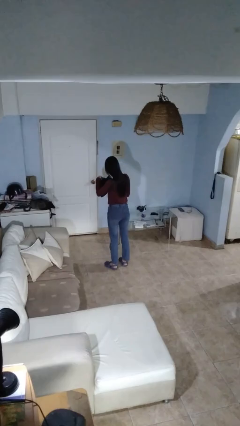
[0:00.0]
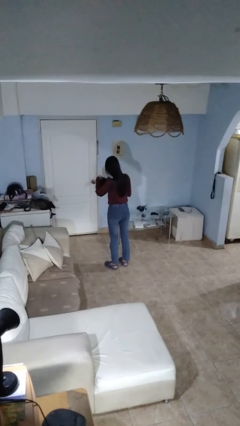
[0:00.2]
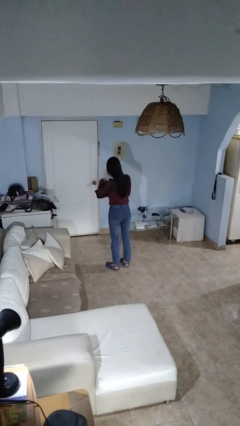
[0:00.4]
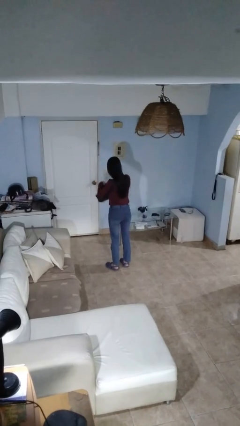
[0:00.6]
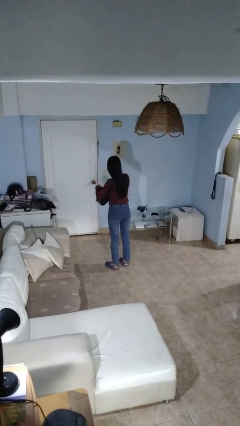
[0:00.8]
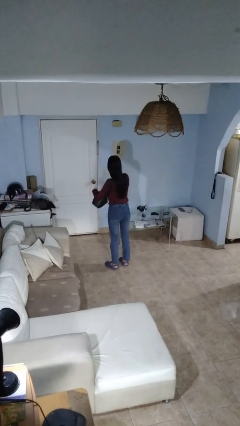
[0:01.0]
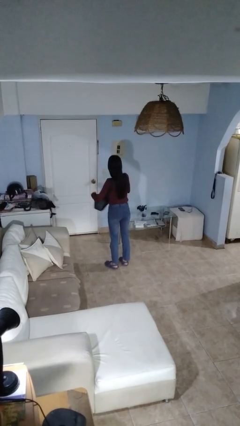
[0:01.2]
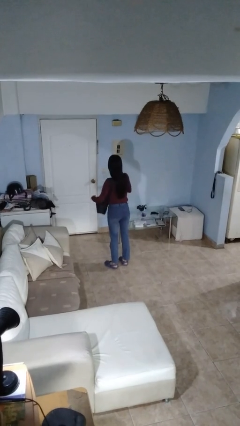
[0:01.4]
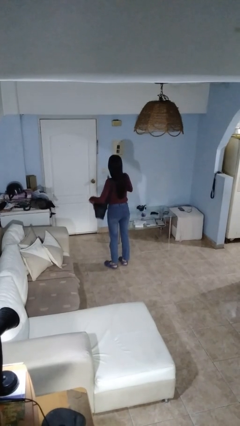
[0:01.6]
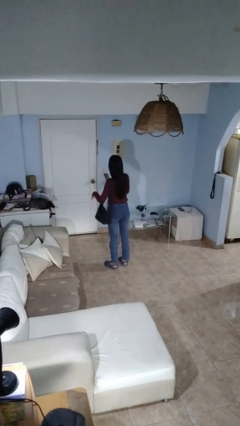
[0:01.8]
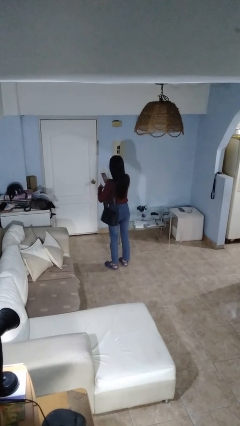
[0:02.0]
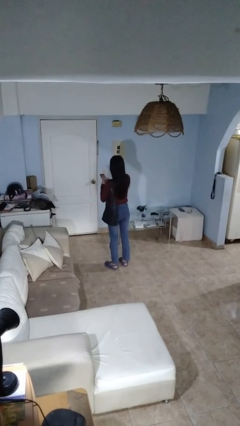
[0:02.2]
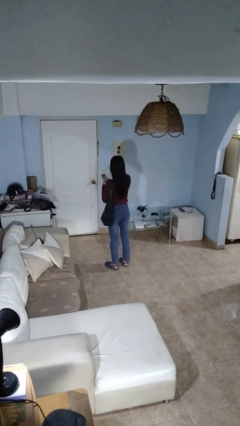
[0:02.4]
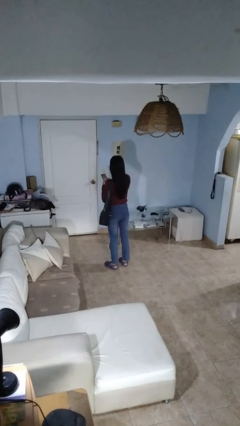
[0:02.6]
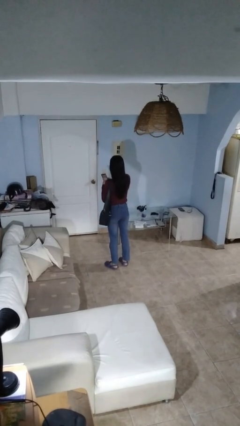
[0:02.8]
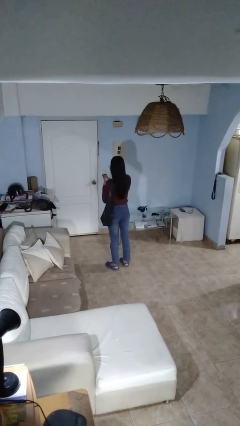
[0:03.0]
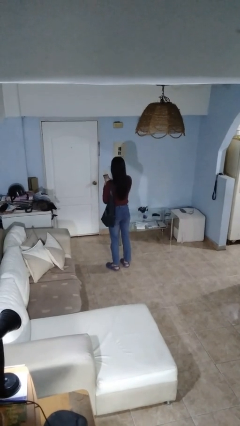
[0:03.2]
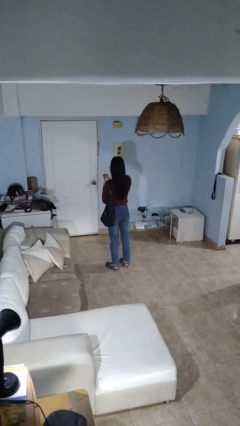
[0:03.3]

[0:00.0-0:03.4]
person takes object from purse

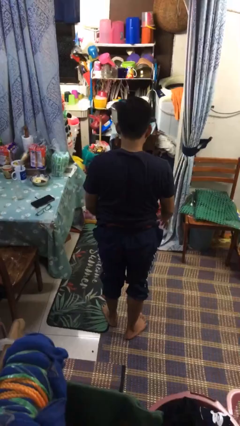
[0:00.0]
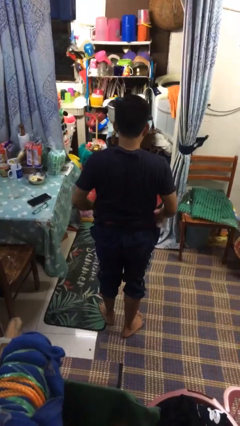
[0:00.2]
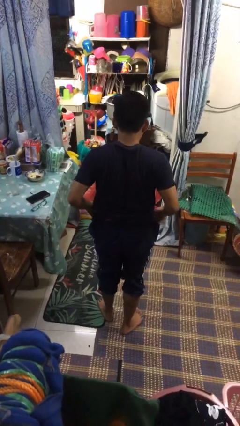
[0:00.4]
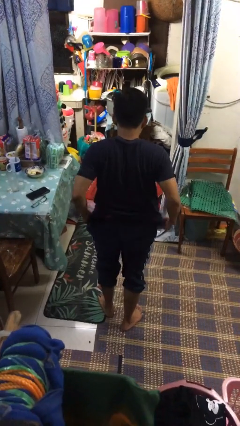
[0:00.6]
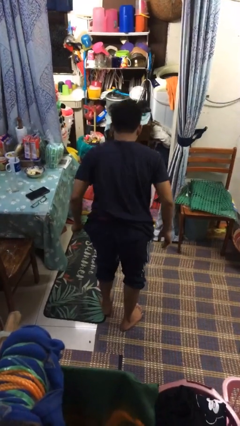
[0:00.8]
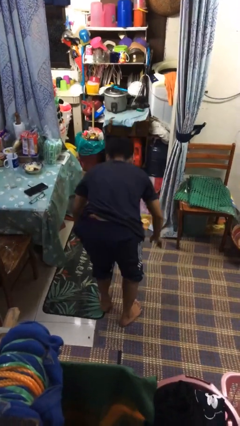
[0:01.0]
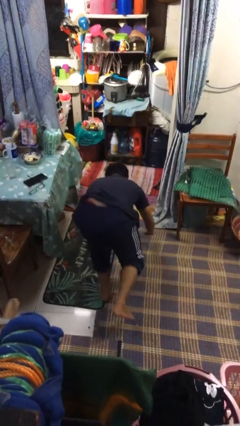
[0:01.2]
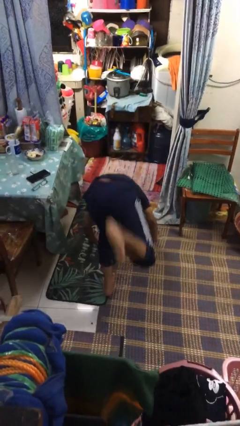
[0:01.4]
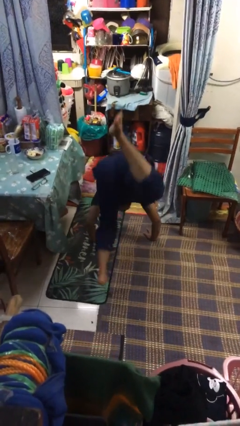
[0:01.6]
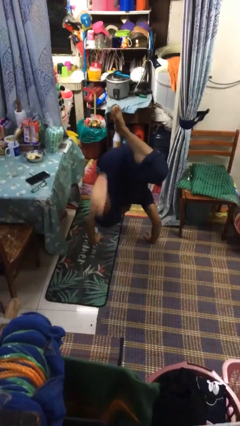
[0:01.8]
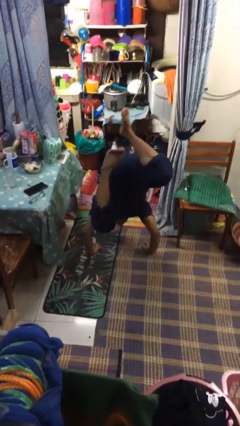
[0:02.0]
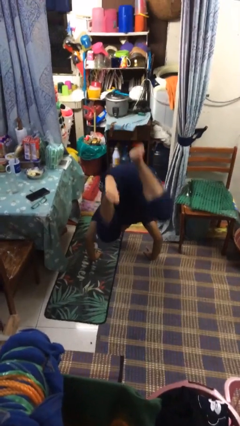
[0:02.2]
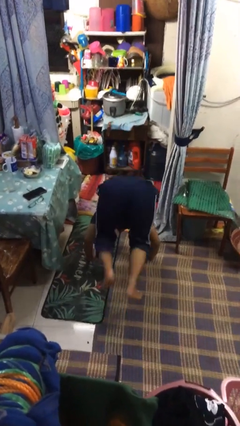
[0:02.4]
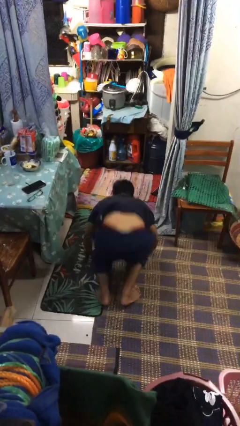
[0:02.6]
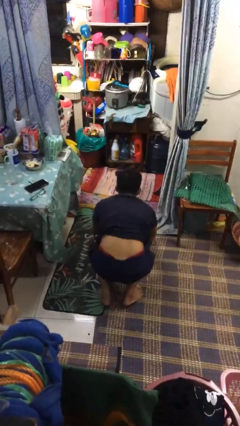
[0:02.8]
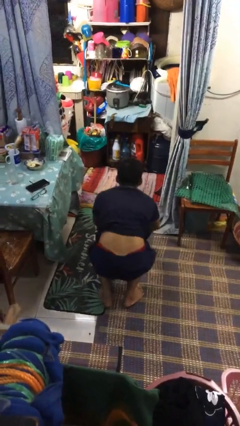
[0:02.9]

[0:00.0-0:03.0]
person handstand

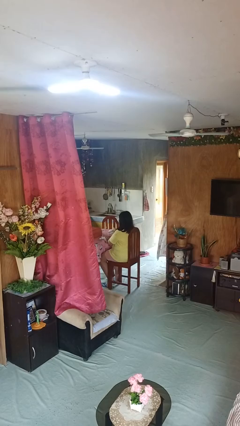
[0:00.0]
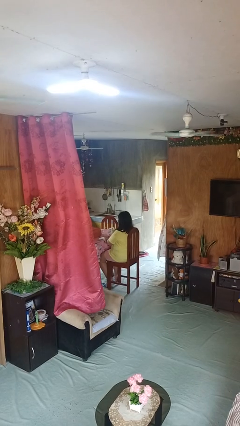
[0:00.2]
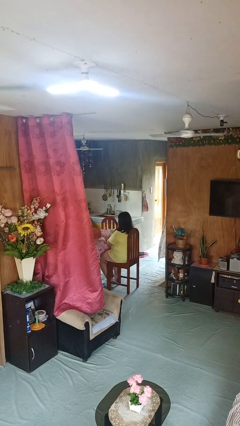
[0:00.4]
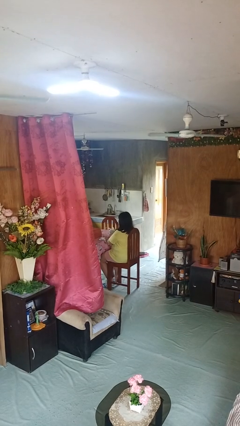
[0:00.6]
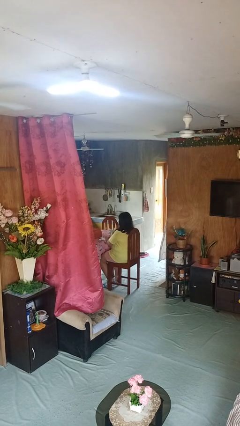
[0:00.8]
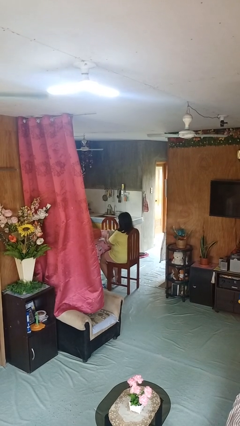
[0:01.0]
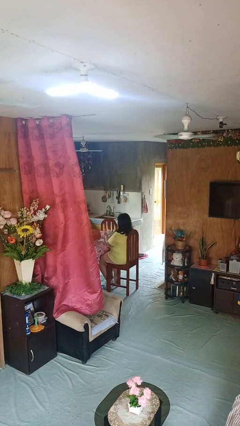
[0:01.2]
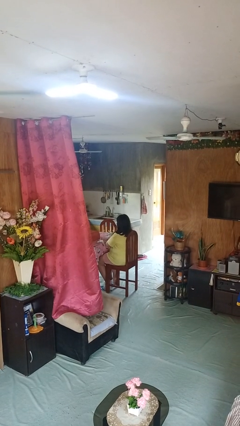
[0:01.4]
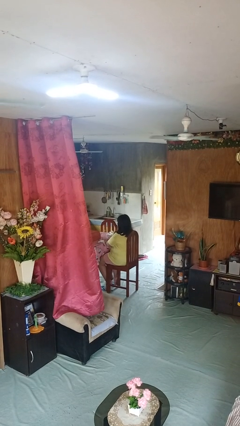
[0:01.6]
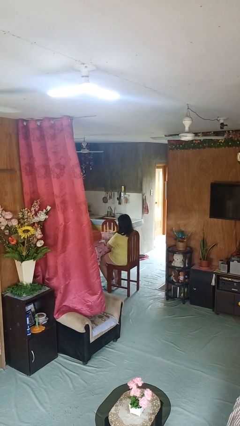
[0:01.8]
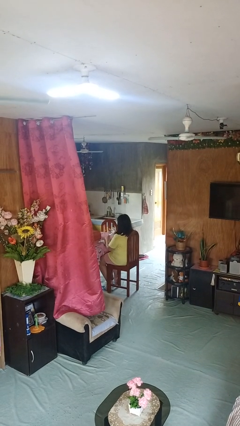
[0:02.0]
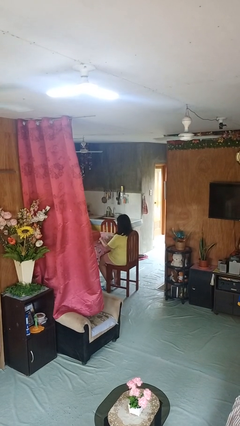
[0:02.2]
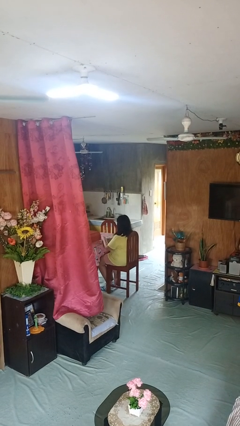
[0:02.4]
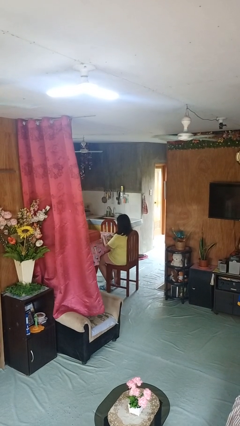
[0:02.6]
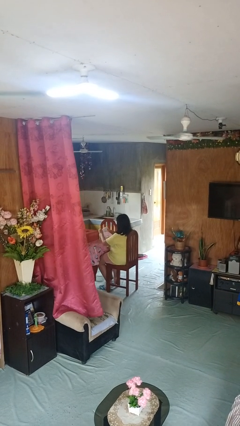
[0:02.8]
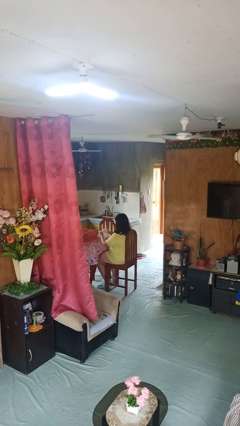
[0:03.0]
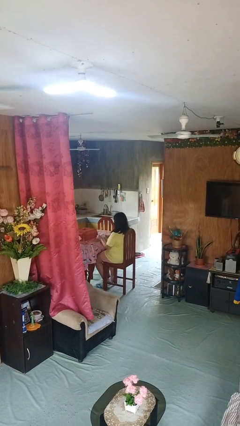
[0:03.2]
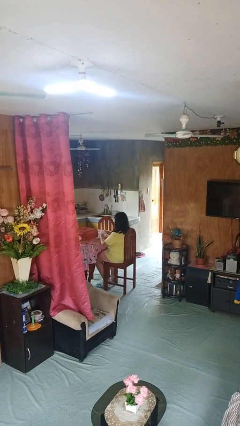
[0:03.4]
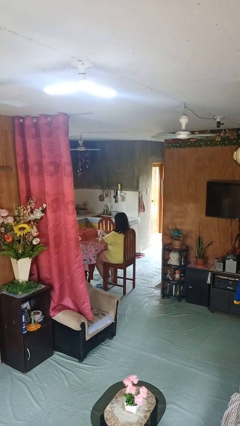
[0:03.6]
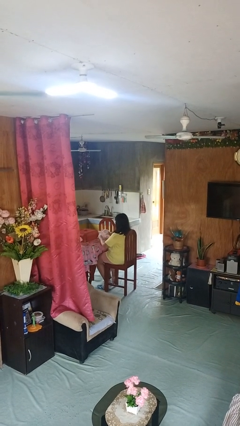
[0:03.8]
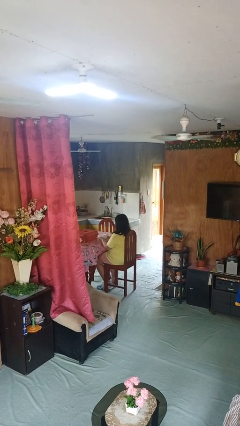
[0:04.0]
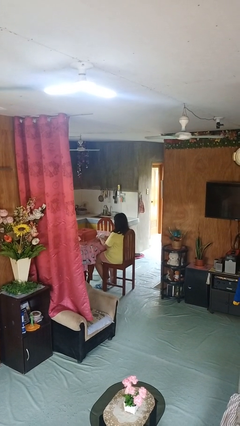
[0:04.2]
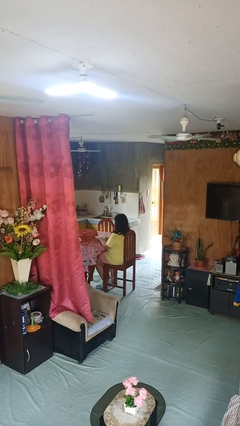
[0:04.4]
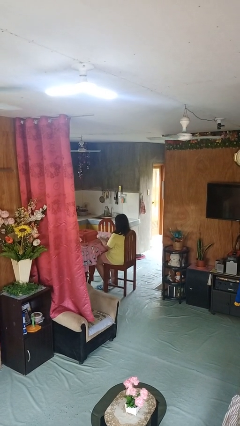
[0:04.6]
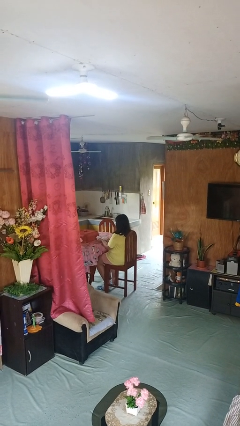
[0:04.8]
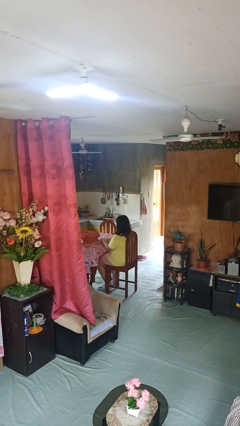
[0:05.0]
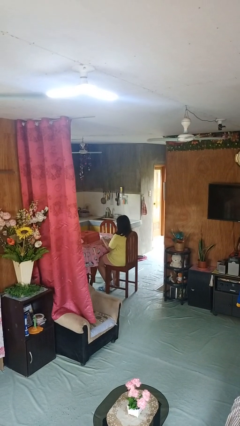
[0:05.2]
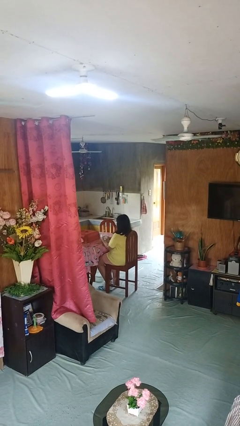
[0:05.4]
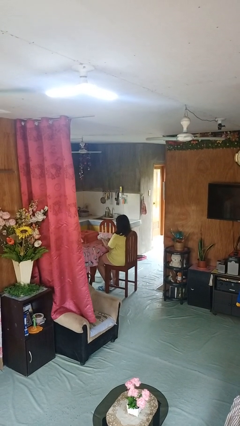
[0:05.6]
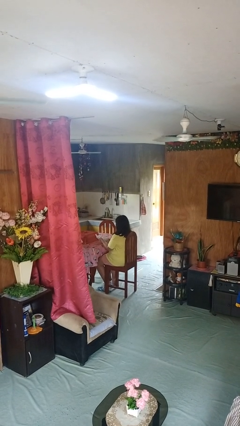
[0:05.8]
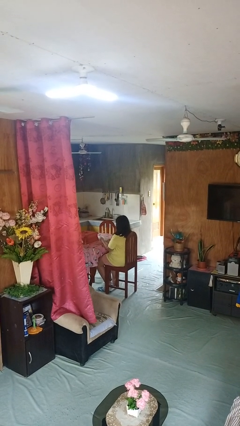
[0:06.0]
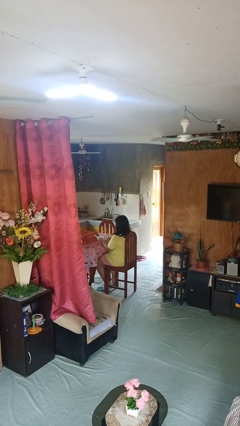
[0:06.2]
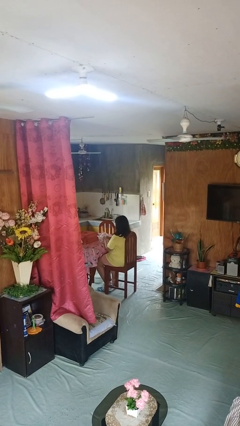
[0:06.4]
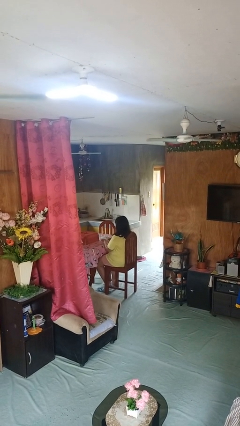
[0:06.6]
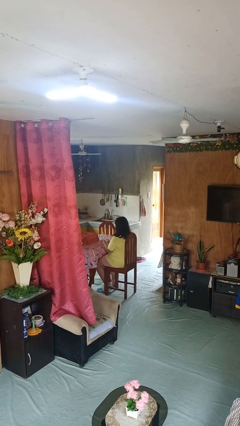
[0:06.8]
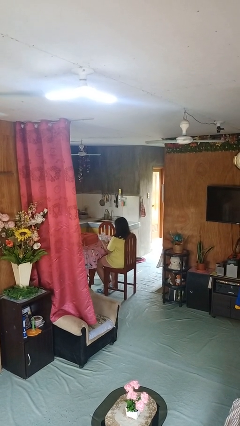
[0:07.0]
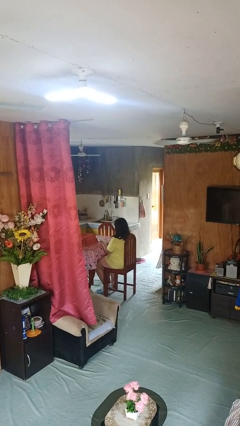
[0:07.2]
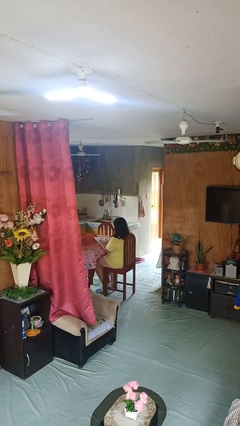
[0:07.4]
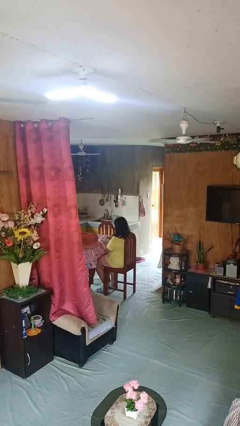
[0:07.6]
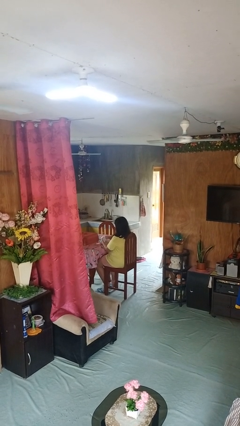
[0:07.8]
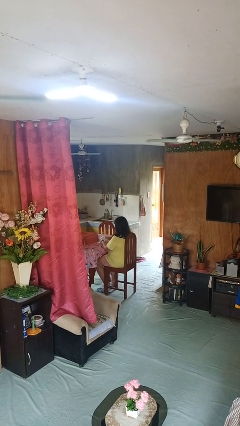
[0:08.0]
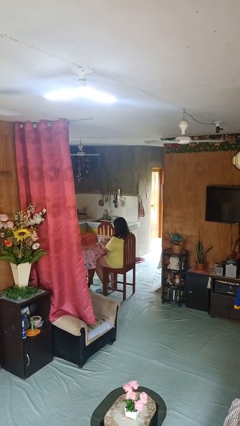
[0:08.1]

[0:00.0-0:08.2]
person puts on gloves

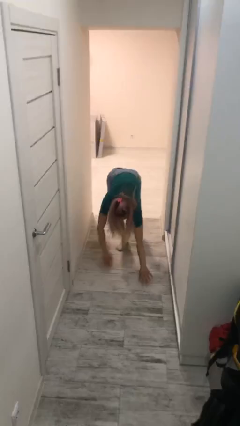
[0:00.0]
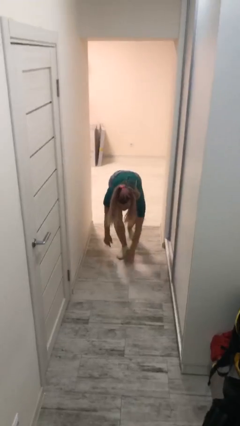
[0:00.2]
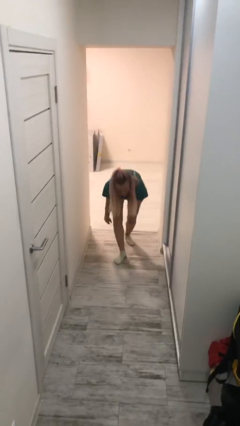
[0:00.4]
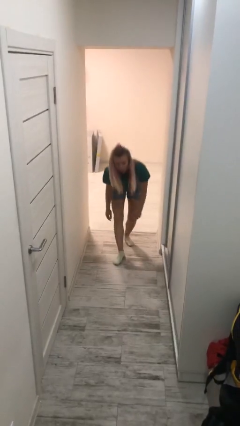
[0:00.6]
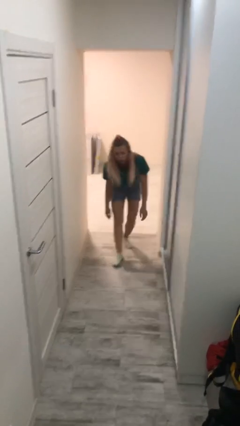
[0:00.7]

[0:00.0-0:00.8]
person stands up from floor

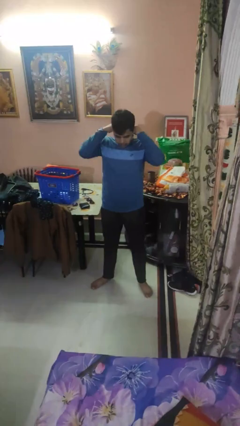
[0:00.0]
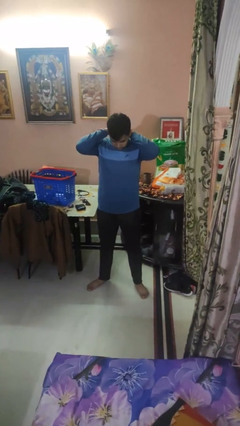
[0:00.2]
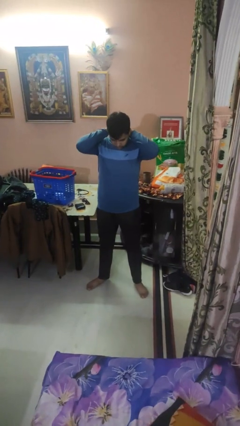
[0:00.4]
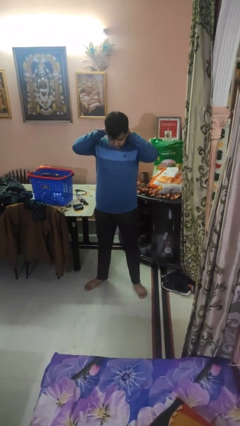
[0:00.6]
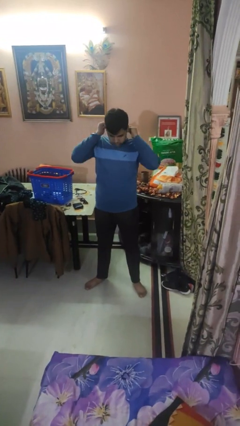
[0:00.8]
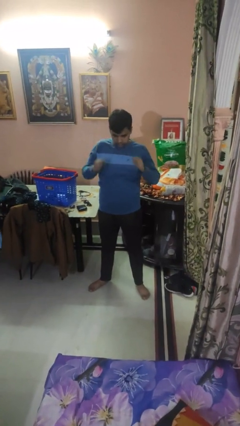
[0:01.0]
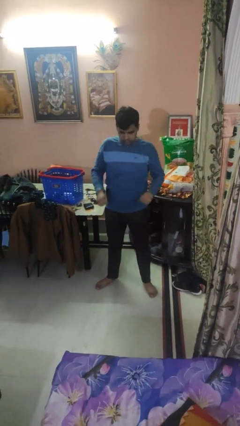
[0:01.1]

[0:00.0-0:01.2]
person puts on necklace
